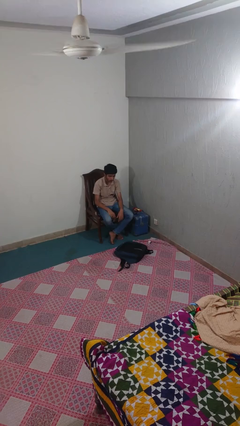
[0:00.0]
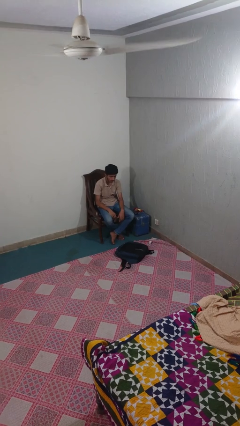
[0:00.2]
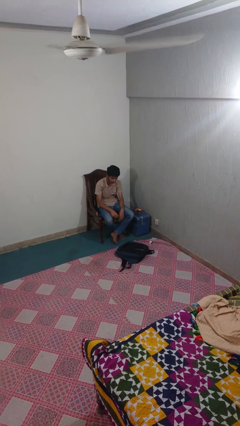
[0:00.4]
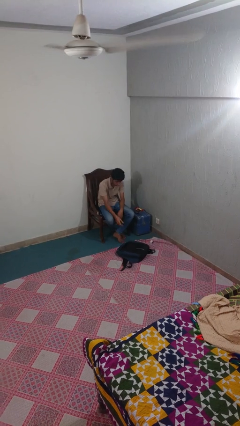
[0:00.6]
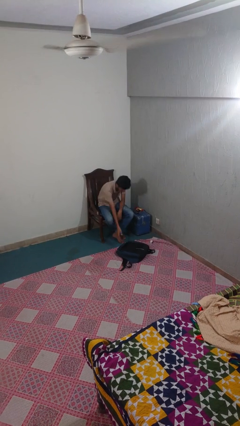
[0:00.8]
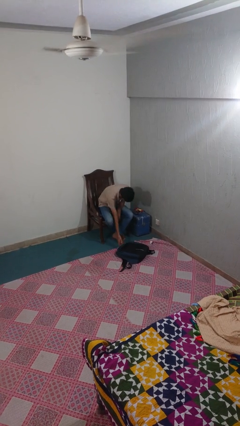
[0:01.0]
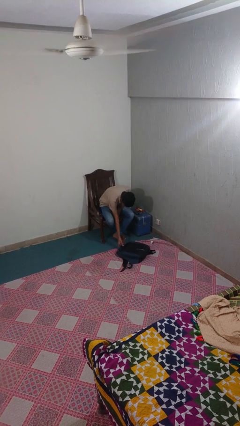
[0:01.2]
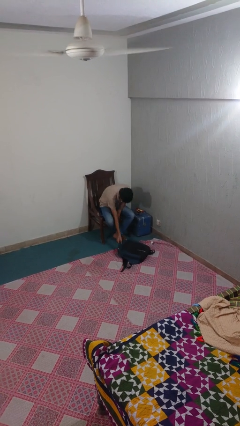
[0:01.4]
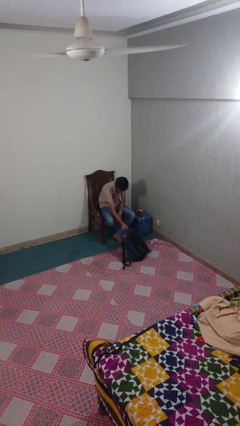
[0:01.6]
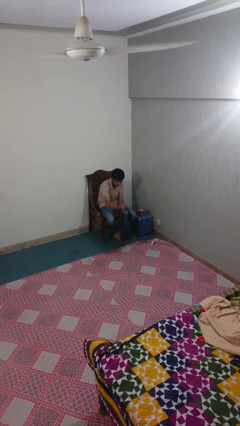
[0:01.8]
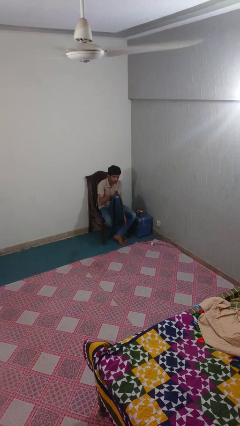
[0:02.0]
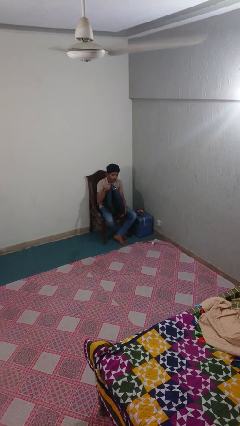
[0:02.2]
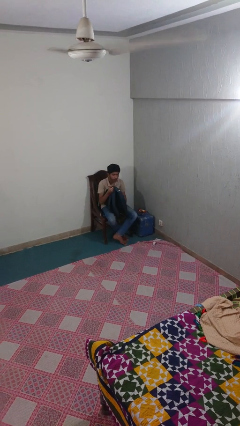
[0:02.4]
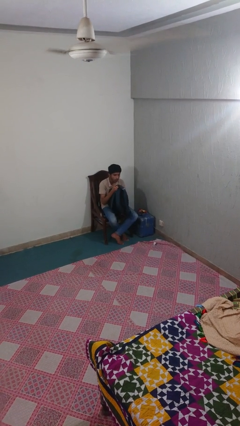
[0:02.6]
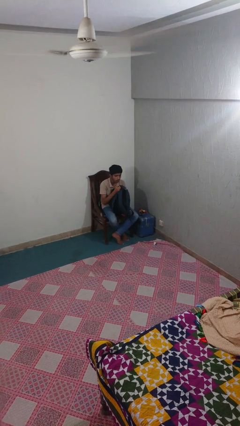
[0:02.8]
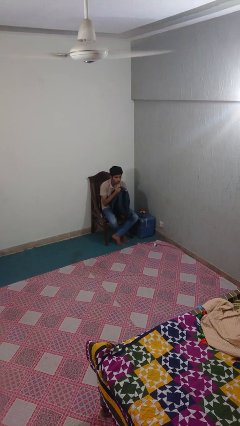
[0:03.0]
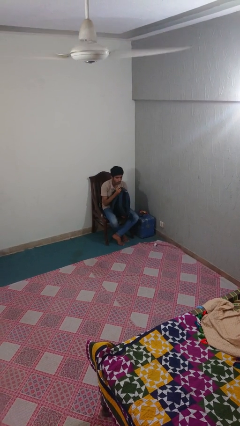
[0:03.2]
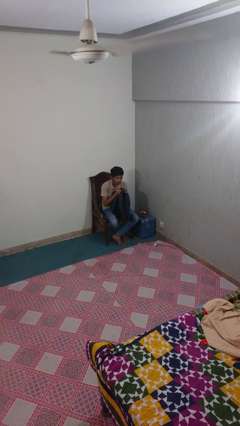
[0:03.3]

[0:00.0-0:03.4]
person picks up object from floor

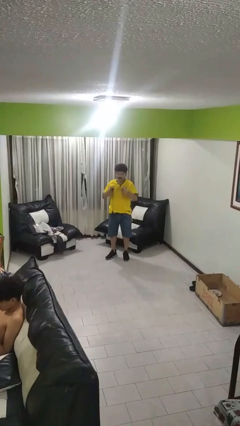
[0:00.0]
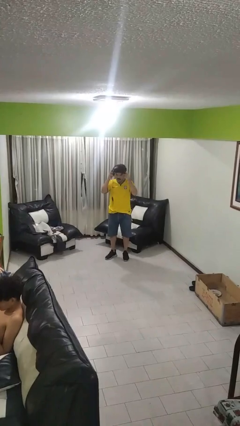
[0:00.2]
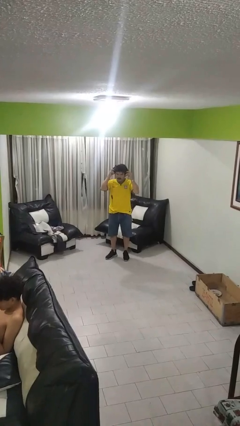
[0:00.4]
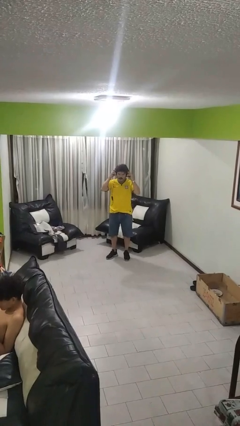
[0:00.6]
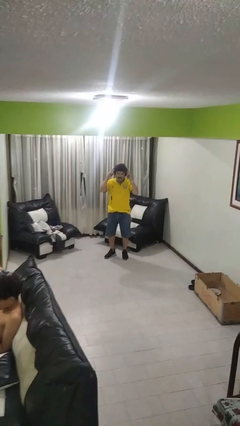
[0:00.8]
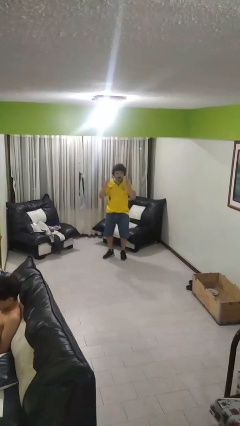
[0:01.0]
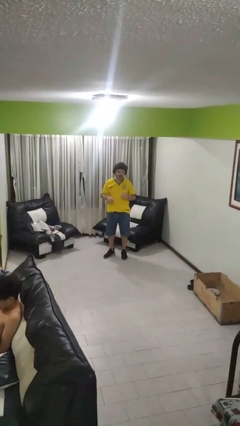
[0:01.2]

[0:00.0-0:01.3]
person puts on headphones

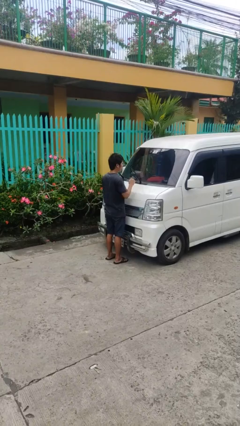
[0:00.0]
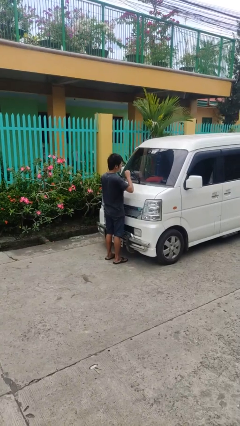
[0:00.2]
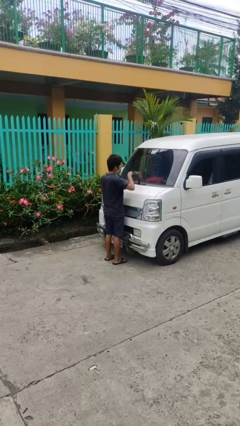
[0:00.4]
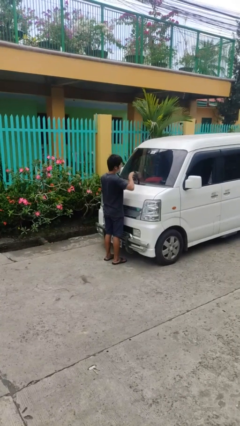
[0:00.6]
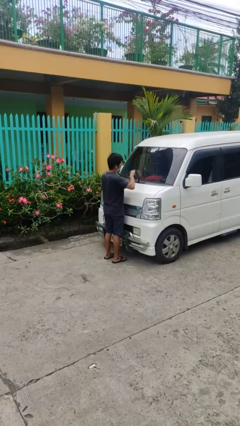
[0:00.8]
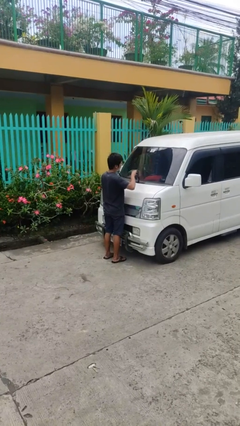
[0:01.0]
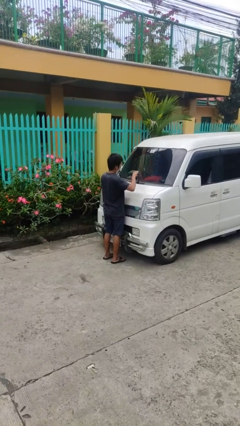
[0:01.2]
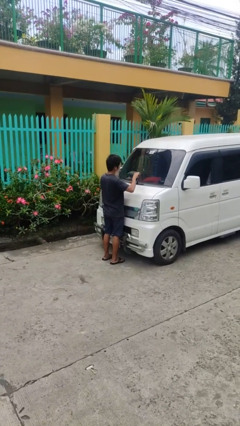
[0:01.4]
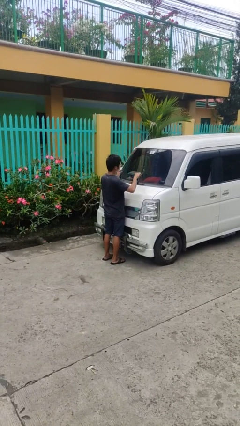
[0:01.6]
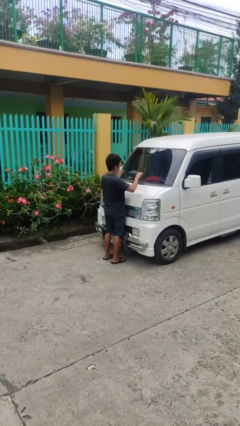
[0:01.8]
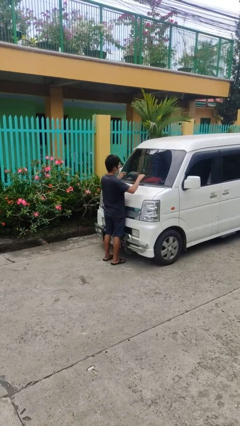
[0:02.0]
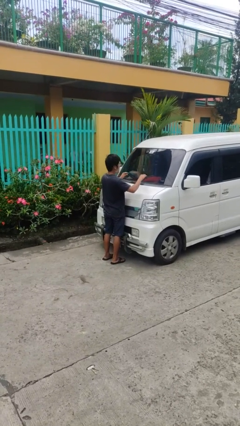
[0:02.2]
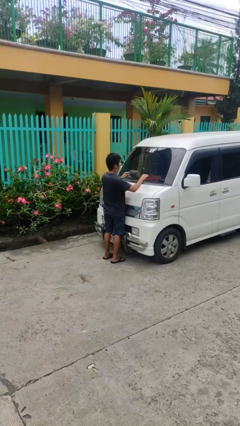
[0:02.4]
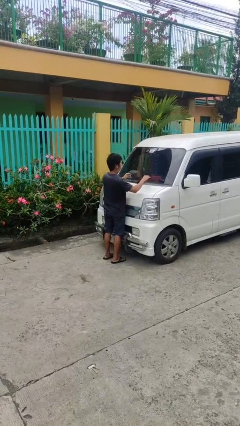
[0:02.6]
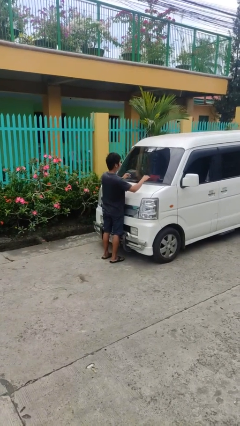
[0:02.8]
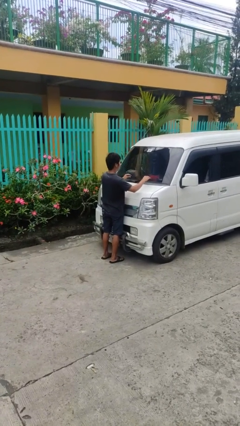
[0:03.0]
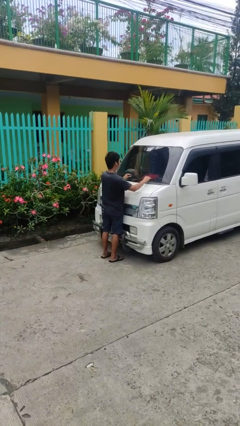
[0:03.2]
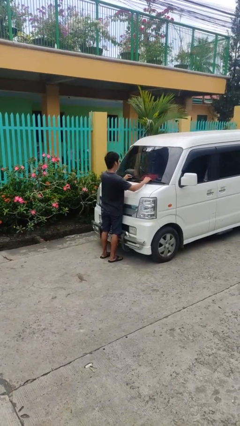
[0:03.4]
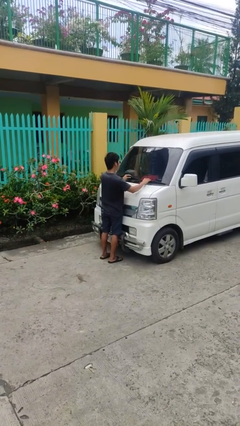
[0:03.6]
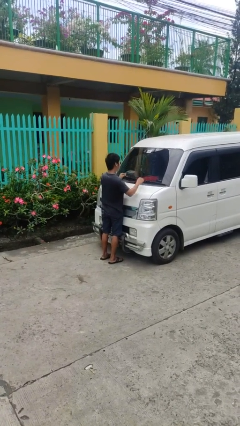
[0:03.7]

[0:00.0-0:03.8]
person flips down car wipers

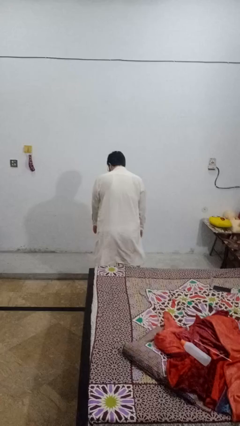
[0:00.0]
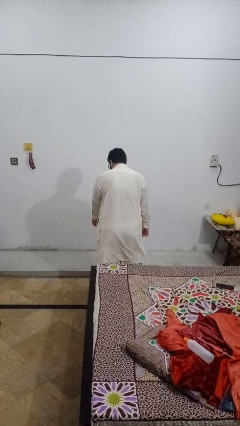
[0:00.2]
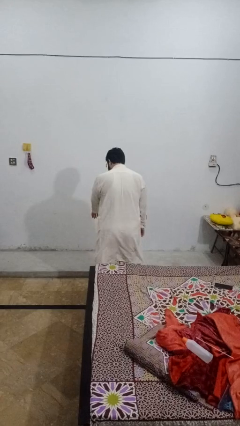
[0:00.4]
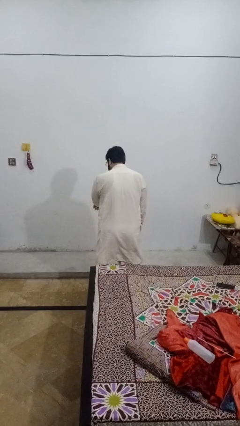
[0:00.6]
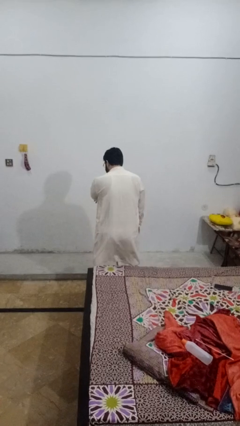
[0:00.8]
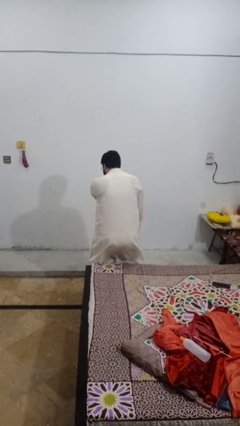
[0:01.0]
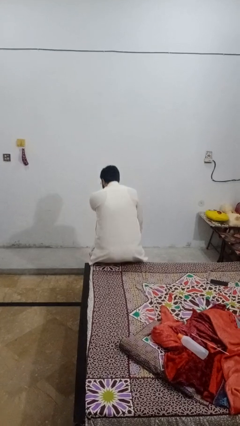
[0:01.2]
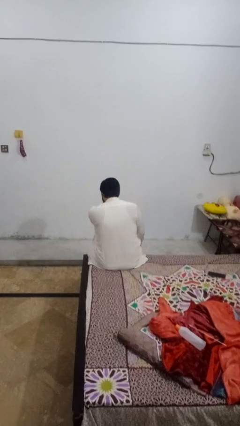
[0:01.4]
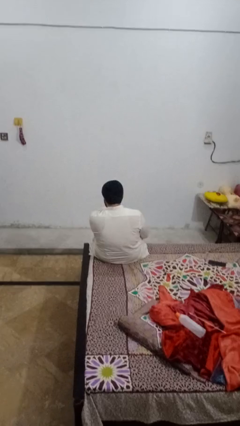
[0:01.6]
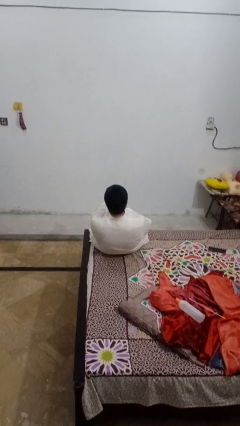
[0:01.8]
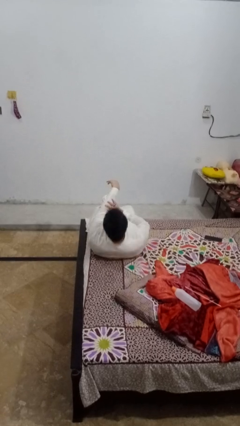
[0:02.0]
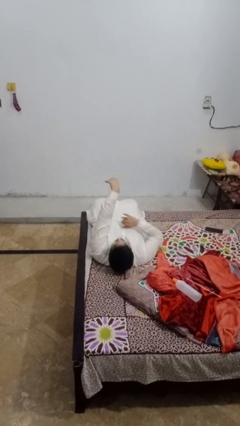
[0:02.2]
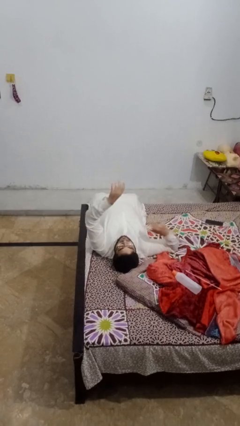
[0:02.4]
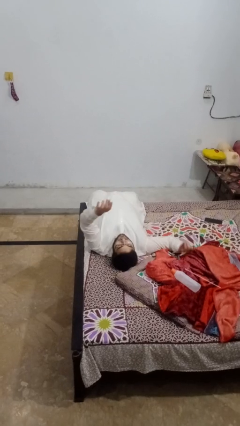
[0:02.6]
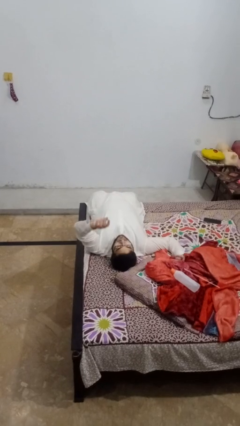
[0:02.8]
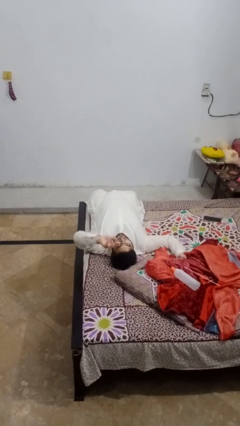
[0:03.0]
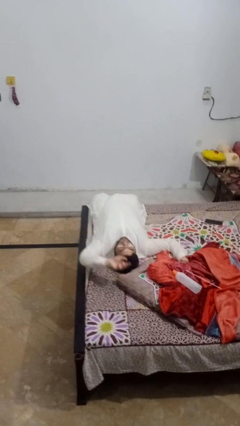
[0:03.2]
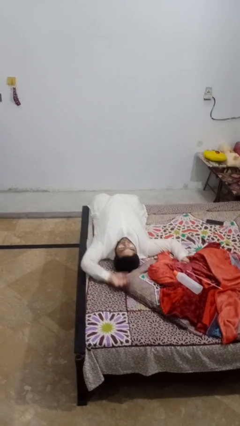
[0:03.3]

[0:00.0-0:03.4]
person lies down on bed

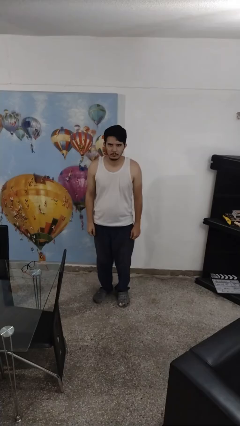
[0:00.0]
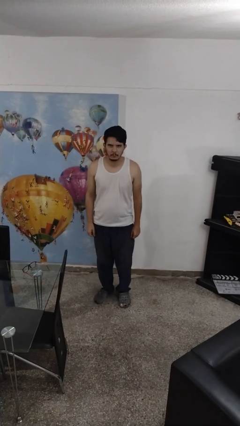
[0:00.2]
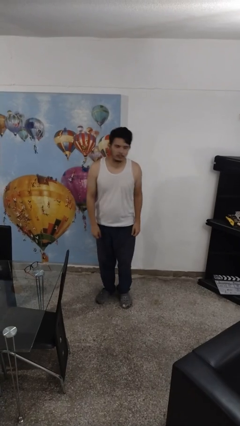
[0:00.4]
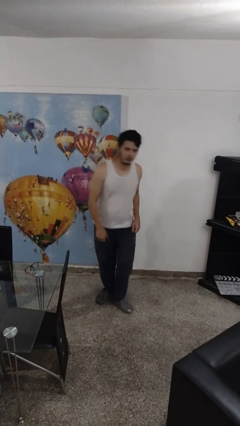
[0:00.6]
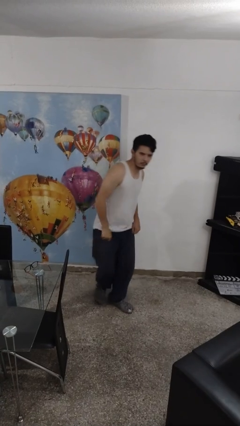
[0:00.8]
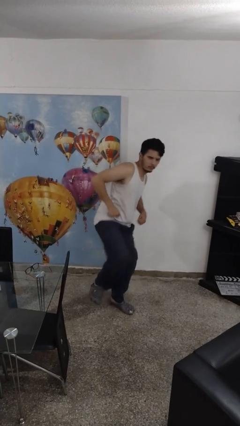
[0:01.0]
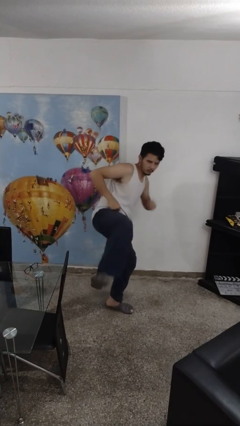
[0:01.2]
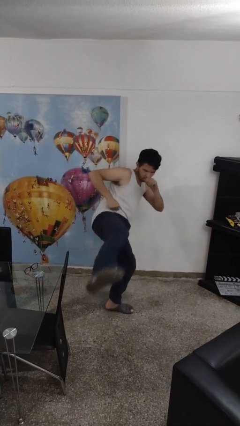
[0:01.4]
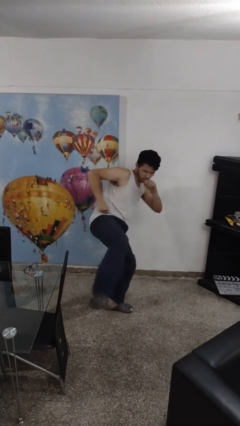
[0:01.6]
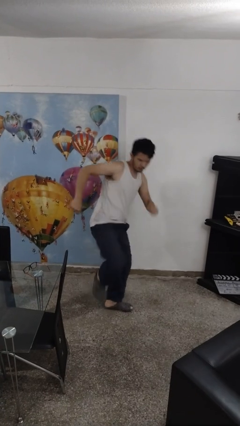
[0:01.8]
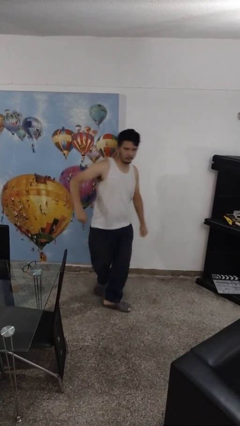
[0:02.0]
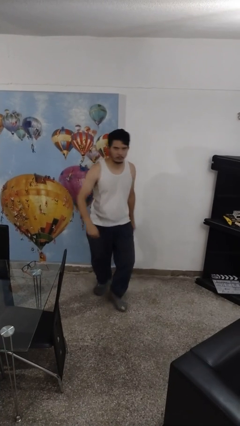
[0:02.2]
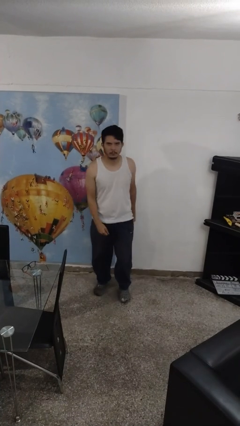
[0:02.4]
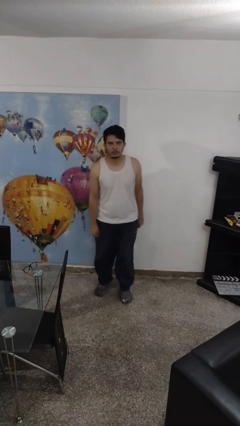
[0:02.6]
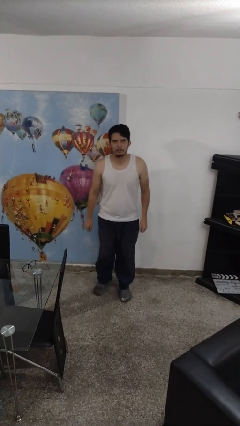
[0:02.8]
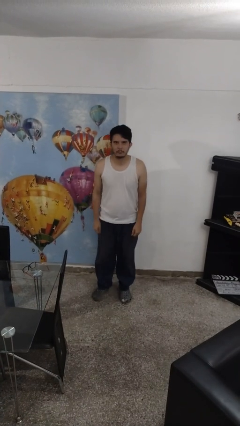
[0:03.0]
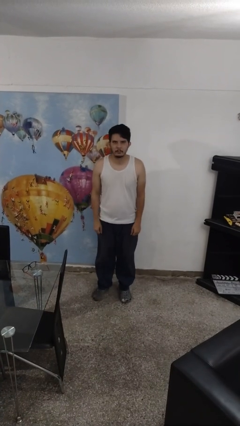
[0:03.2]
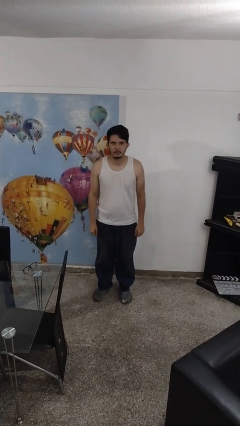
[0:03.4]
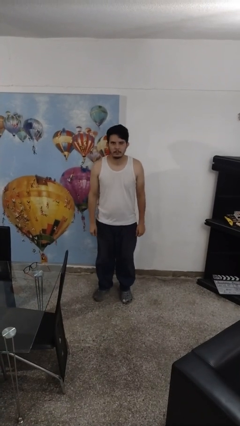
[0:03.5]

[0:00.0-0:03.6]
person karate kicks

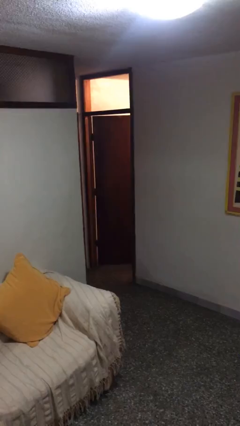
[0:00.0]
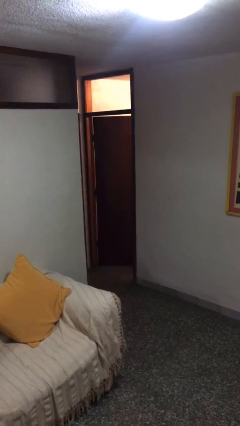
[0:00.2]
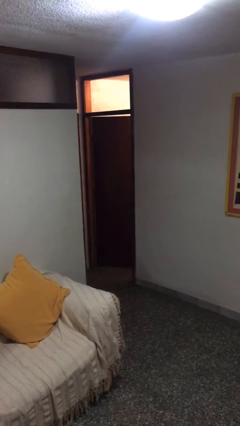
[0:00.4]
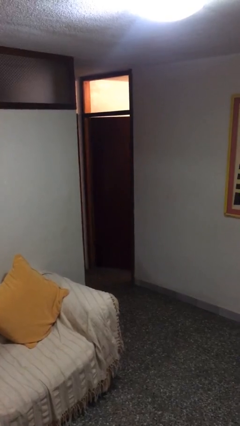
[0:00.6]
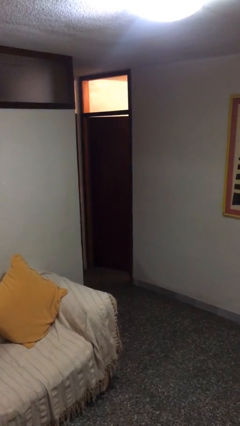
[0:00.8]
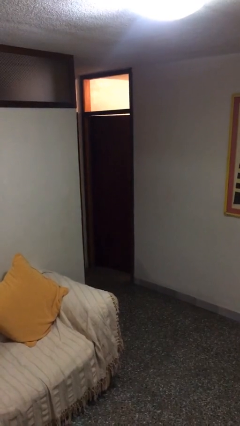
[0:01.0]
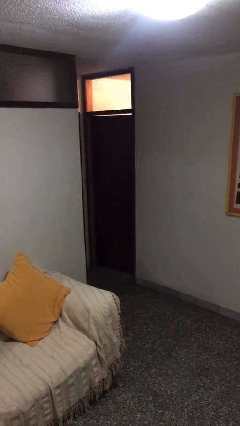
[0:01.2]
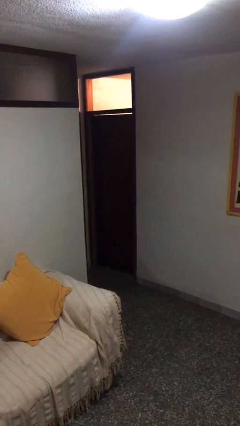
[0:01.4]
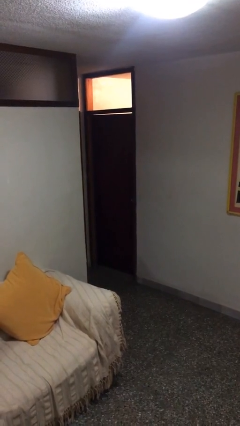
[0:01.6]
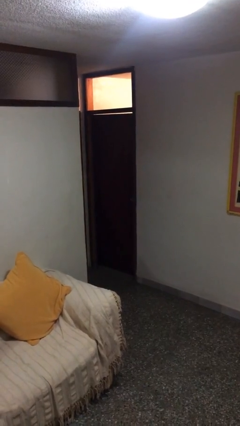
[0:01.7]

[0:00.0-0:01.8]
person closes facility door

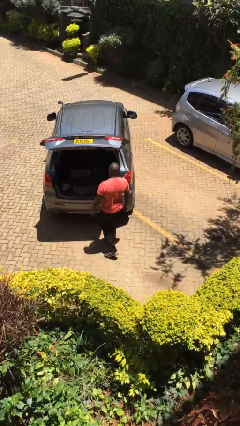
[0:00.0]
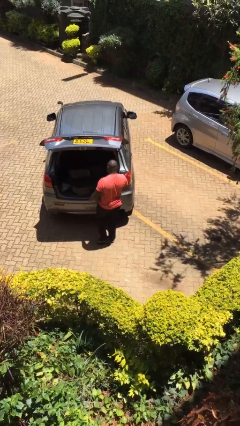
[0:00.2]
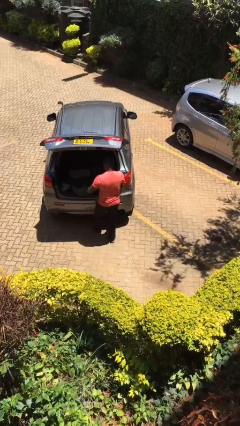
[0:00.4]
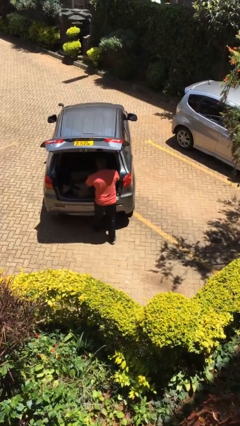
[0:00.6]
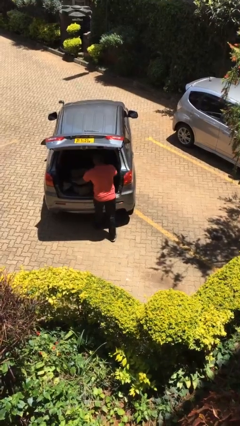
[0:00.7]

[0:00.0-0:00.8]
person loads car
